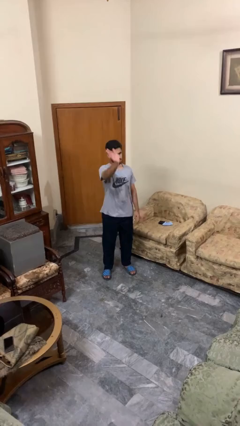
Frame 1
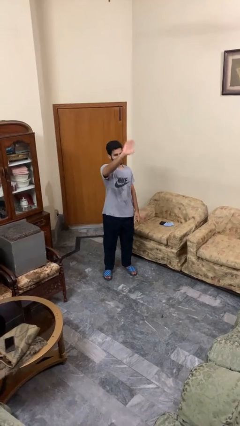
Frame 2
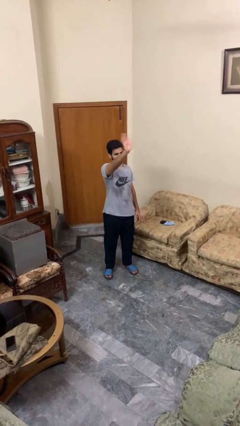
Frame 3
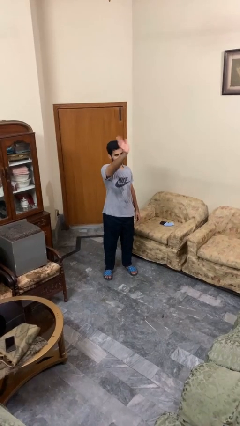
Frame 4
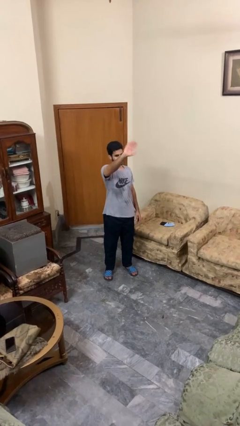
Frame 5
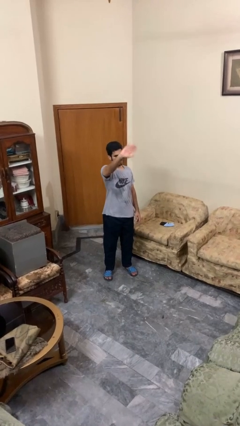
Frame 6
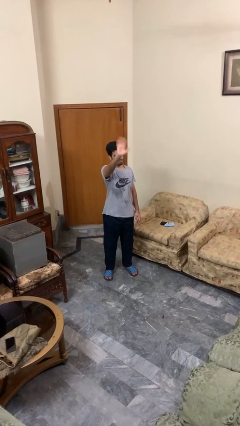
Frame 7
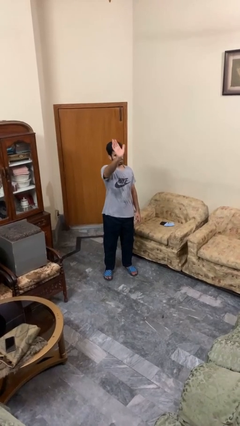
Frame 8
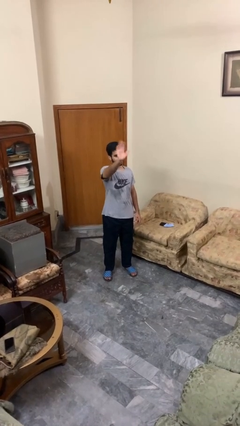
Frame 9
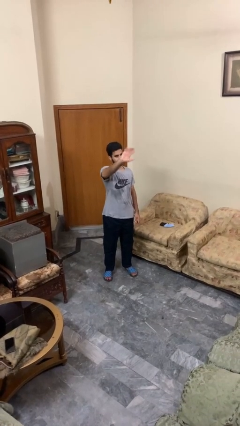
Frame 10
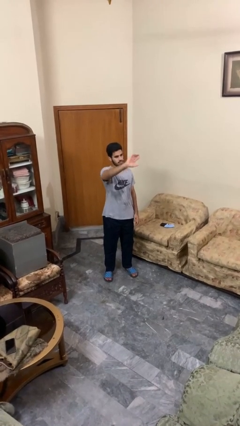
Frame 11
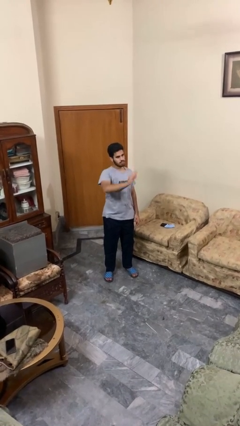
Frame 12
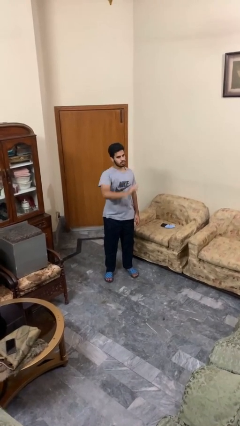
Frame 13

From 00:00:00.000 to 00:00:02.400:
person waves at person

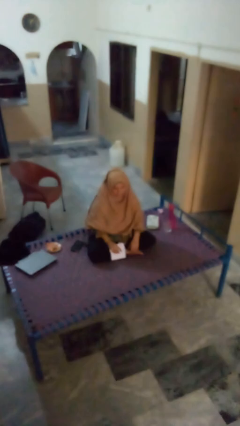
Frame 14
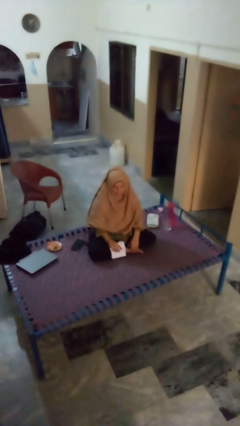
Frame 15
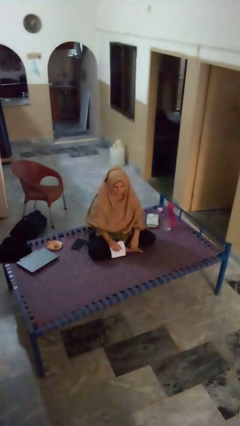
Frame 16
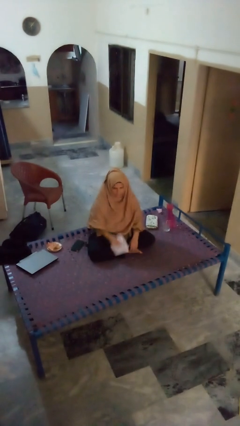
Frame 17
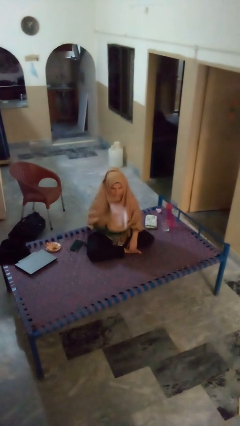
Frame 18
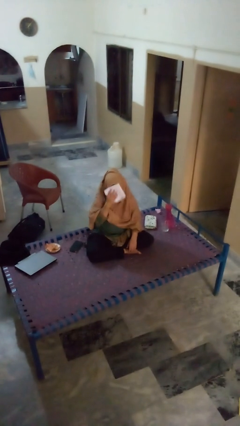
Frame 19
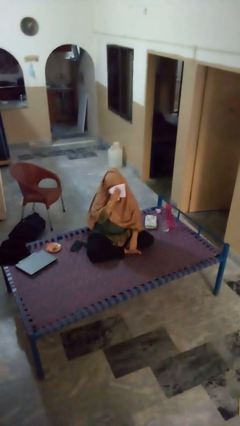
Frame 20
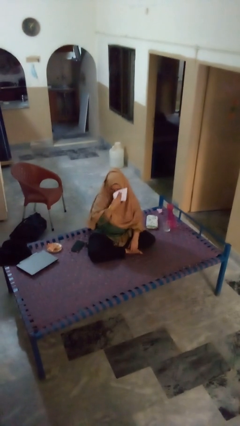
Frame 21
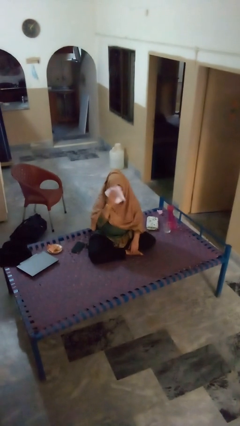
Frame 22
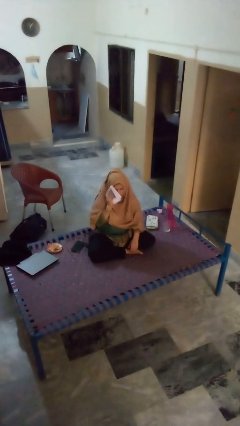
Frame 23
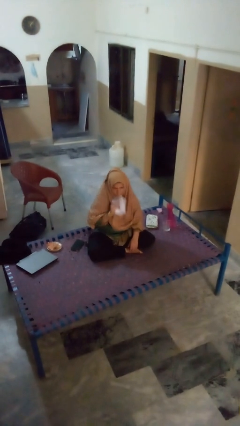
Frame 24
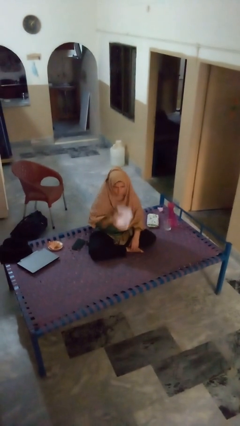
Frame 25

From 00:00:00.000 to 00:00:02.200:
person wipes mouth with napkin

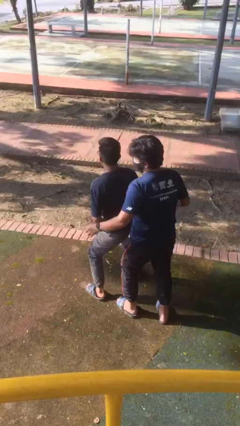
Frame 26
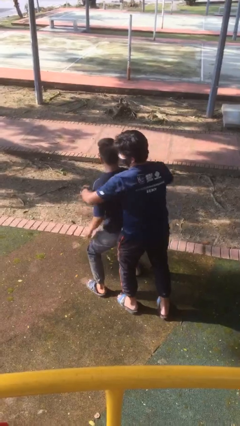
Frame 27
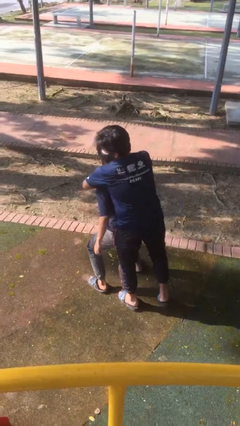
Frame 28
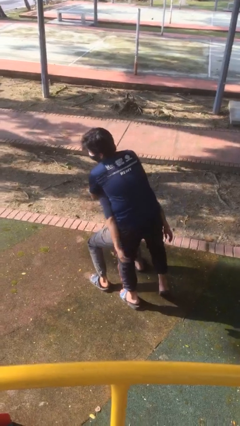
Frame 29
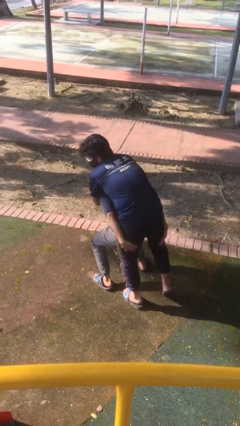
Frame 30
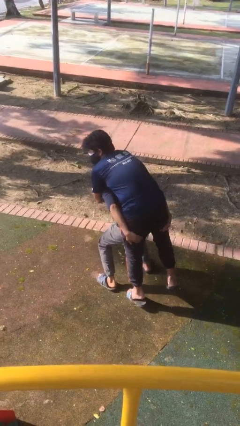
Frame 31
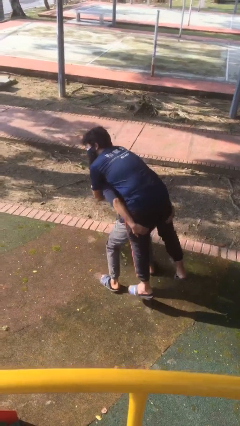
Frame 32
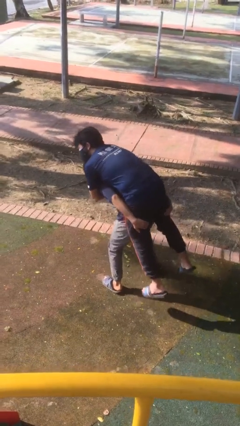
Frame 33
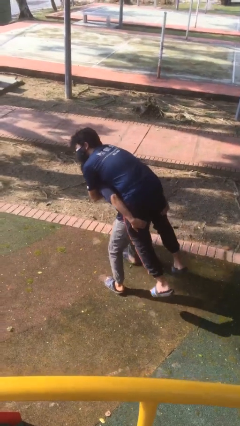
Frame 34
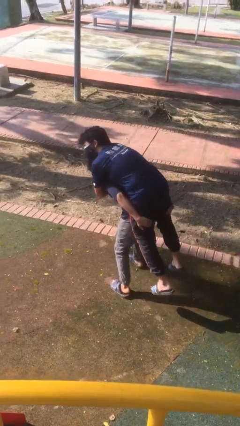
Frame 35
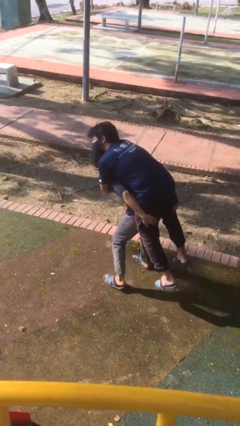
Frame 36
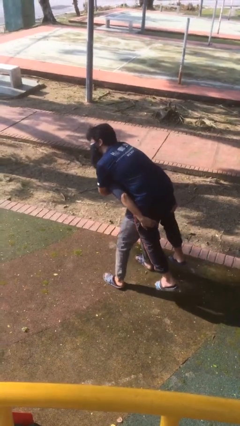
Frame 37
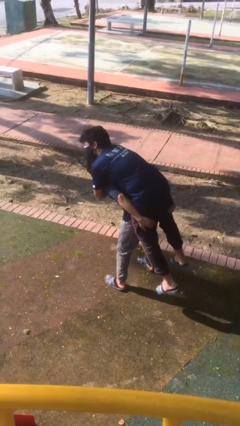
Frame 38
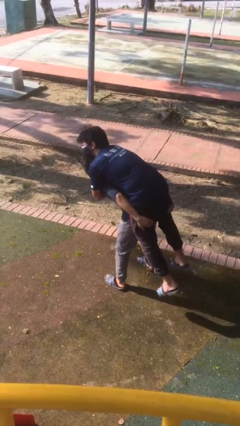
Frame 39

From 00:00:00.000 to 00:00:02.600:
person carries person over shoulder

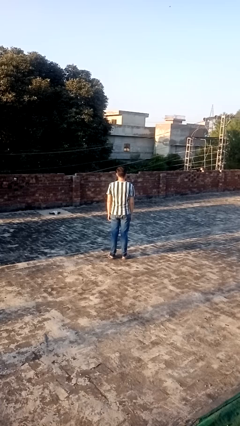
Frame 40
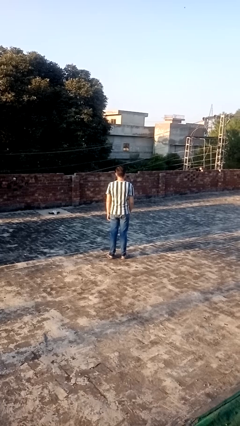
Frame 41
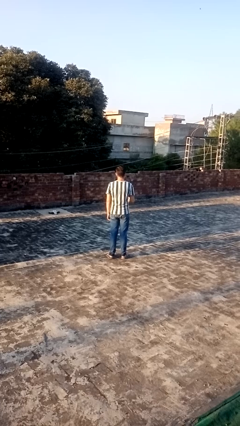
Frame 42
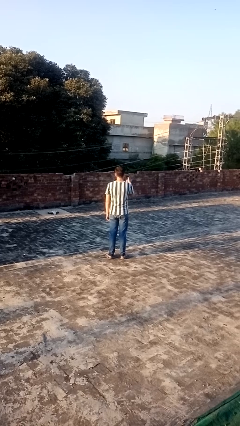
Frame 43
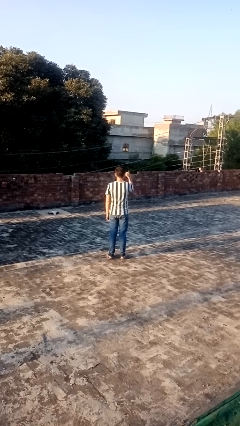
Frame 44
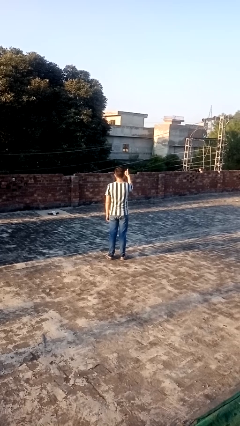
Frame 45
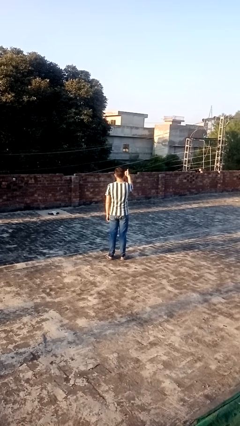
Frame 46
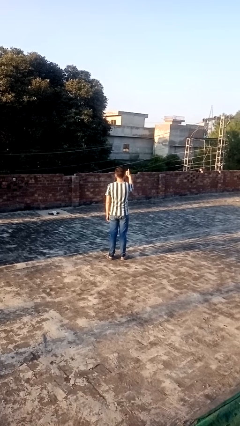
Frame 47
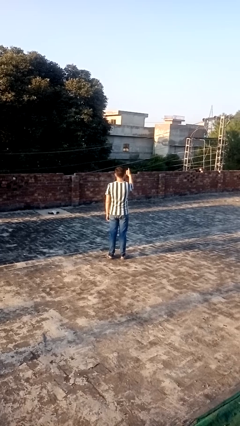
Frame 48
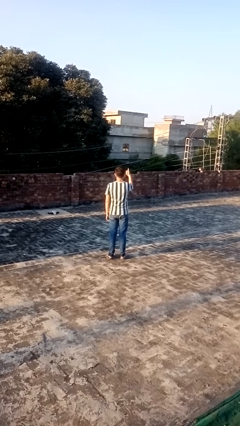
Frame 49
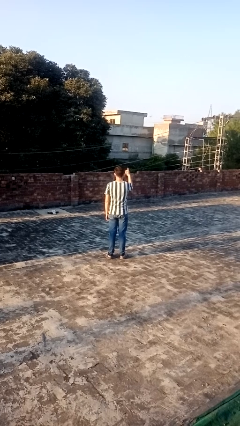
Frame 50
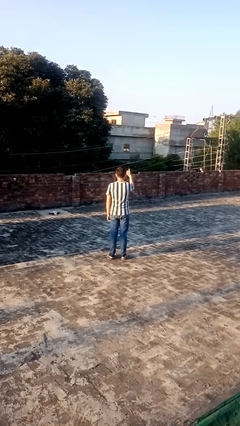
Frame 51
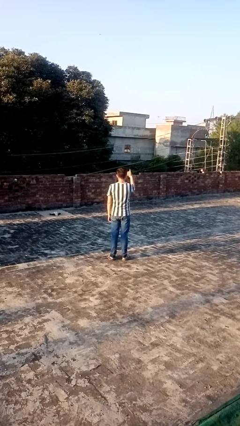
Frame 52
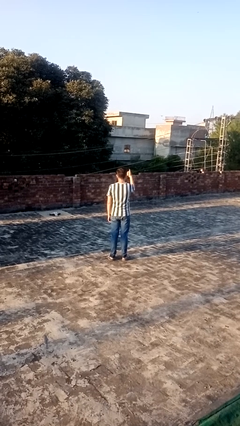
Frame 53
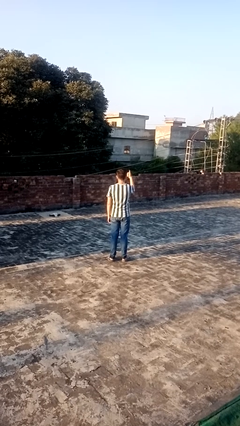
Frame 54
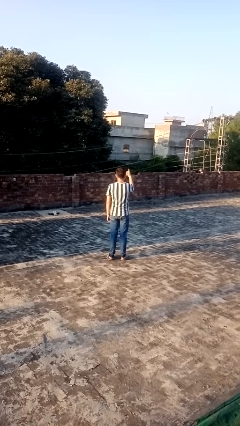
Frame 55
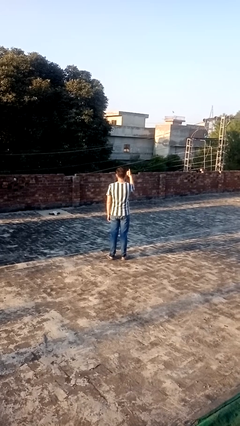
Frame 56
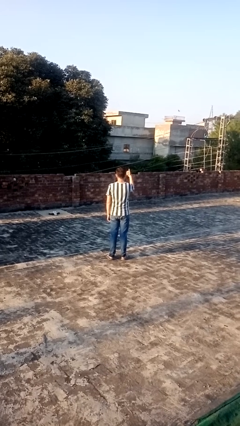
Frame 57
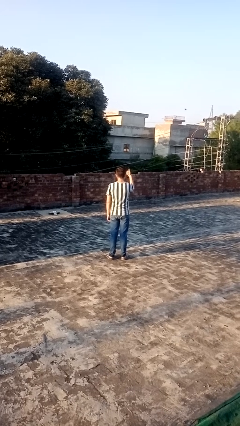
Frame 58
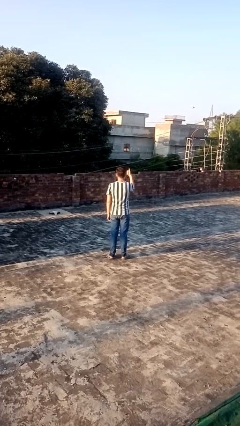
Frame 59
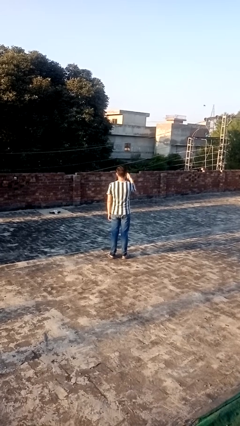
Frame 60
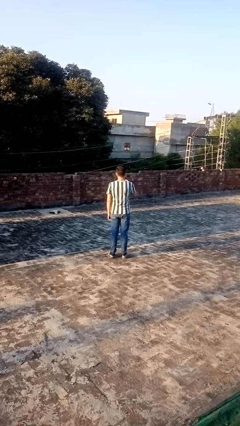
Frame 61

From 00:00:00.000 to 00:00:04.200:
person gestures thumbs up

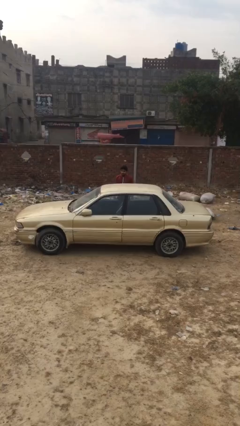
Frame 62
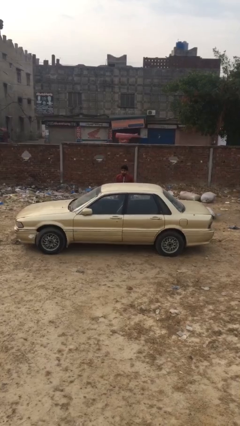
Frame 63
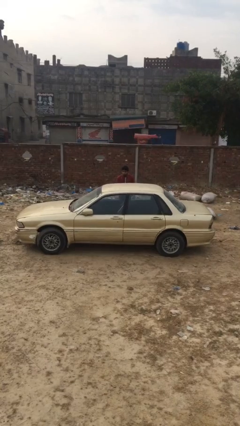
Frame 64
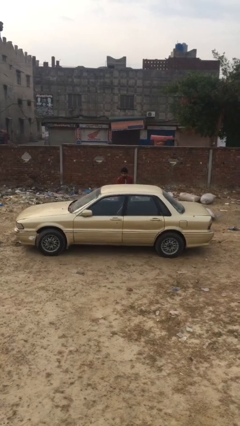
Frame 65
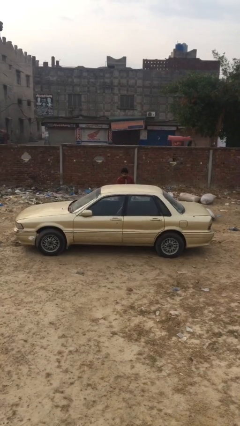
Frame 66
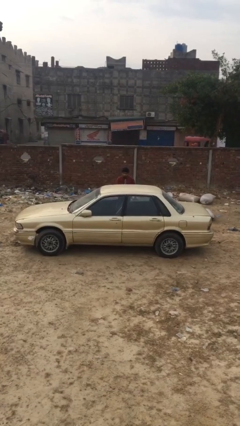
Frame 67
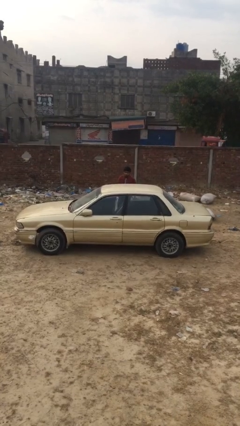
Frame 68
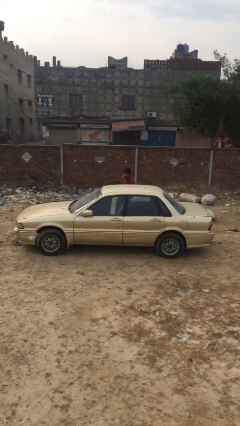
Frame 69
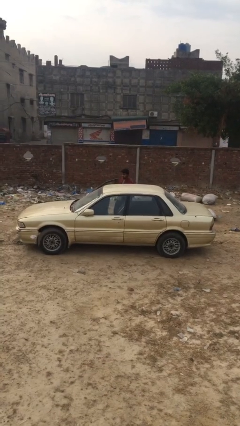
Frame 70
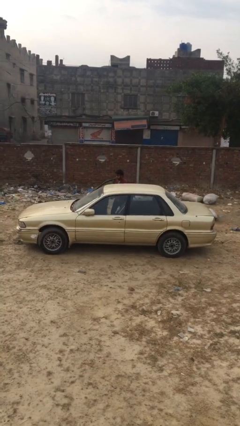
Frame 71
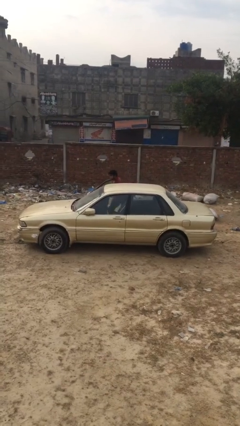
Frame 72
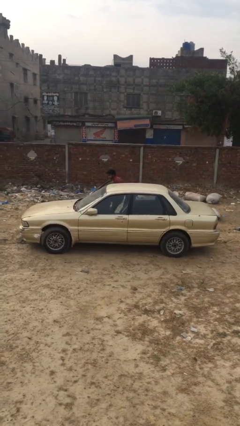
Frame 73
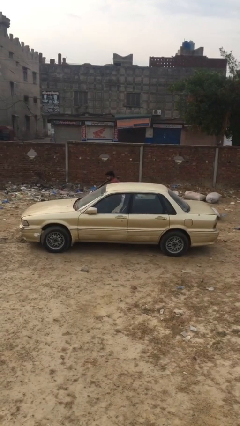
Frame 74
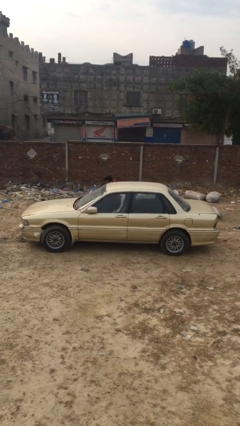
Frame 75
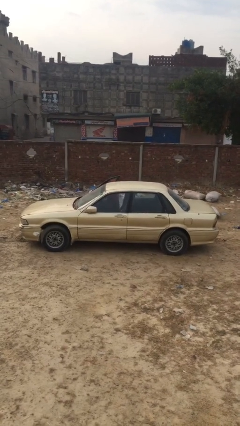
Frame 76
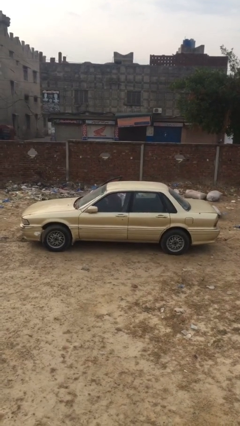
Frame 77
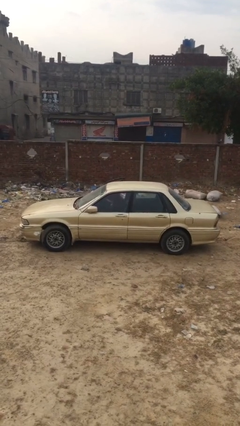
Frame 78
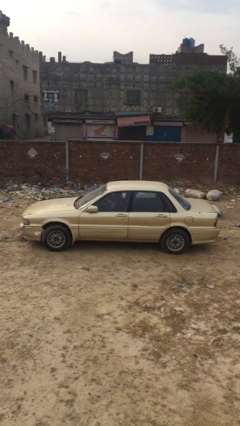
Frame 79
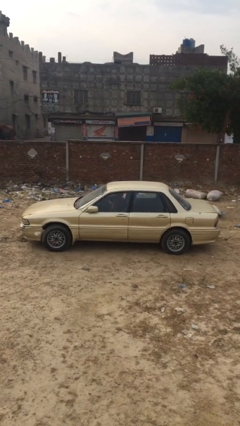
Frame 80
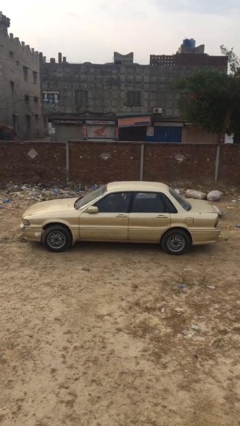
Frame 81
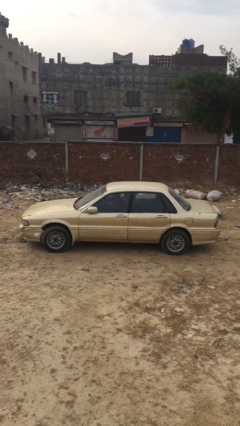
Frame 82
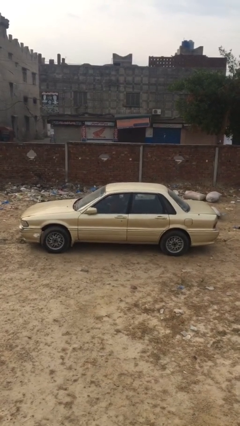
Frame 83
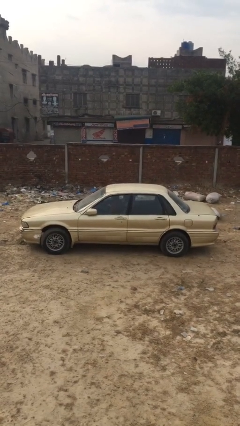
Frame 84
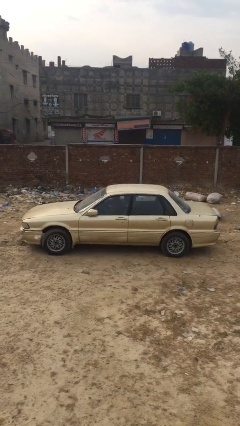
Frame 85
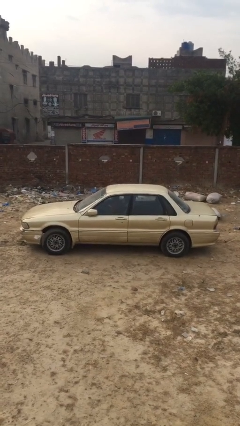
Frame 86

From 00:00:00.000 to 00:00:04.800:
car picks up person

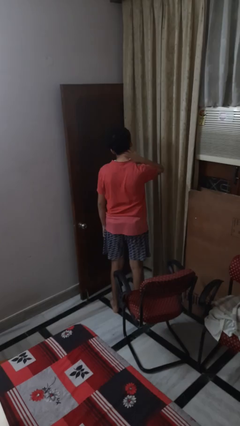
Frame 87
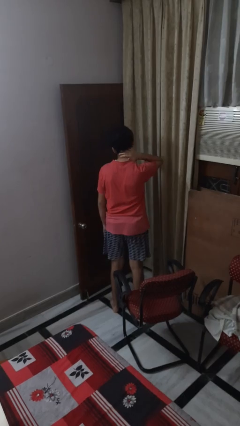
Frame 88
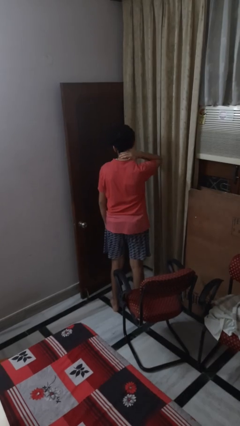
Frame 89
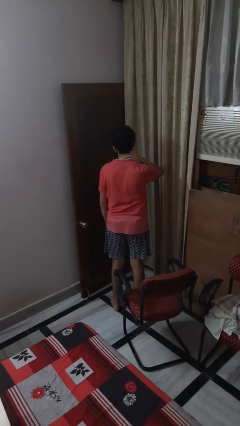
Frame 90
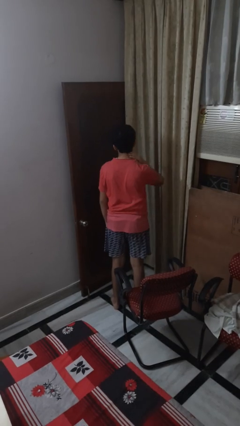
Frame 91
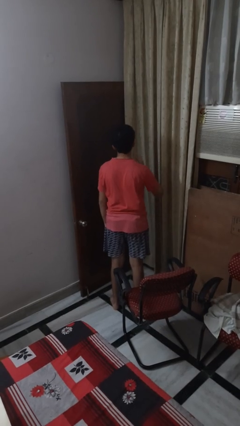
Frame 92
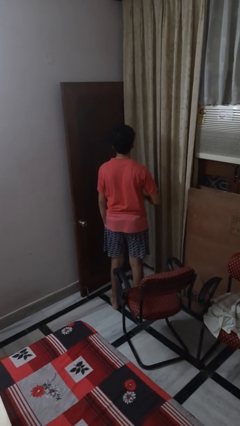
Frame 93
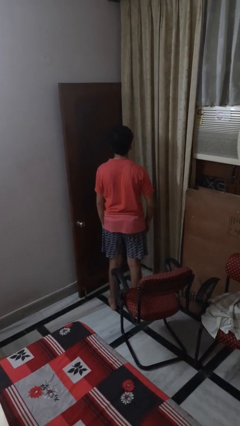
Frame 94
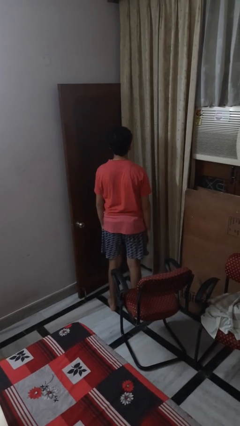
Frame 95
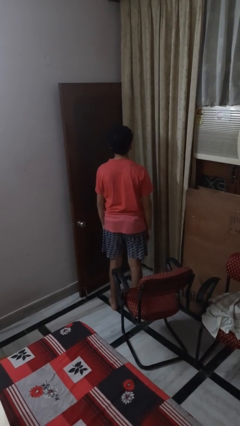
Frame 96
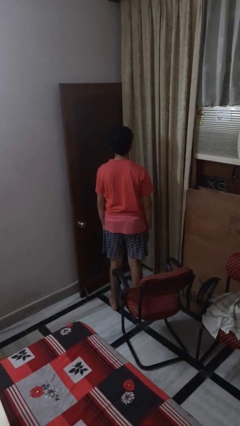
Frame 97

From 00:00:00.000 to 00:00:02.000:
person rubs neck
